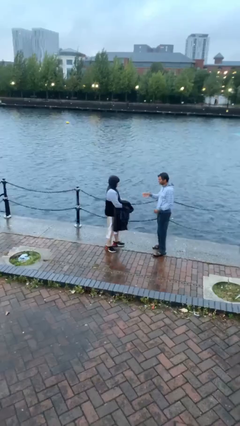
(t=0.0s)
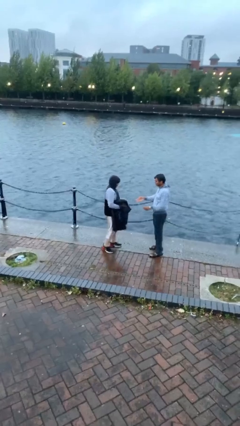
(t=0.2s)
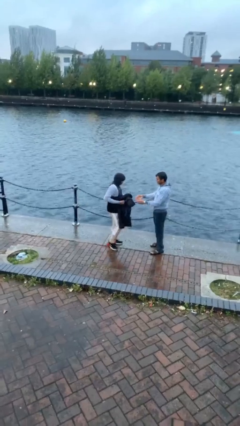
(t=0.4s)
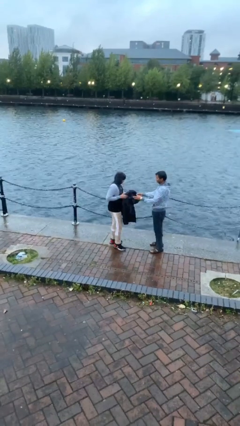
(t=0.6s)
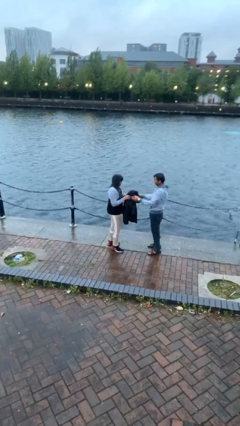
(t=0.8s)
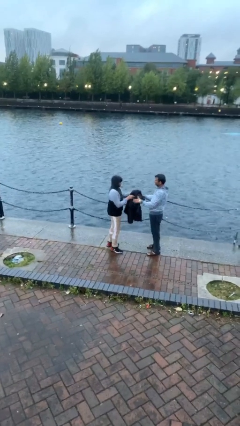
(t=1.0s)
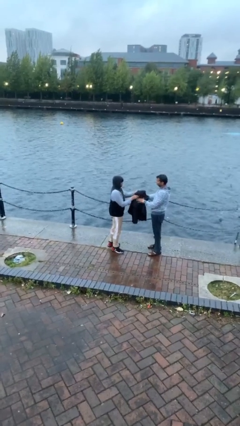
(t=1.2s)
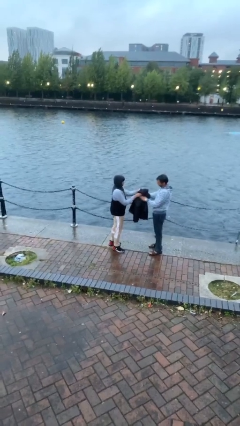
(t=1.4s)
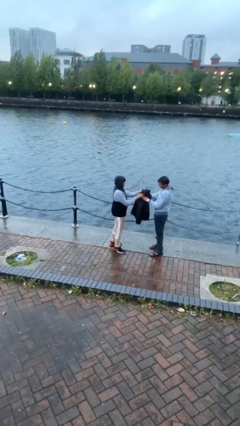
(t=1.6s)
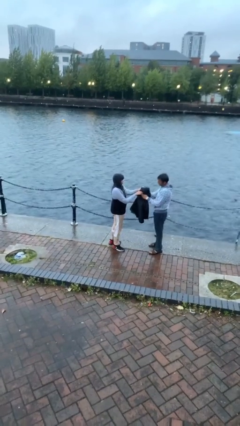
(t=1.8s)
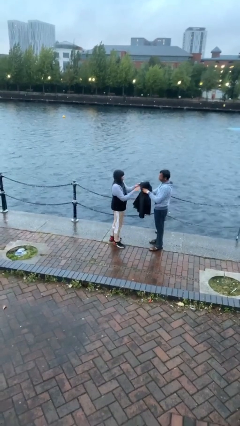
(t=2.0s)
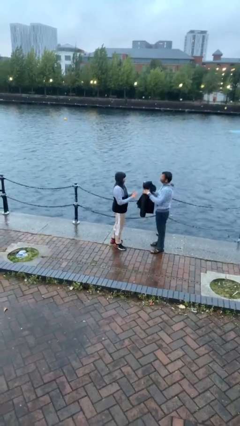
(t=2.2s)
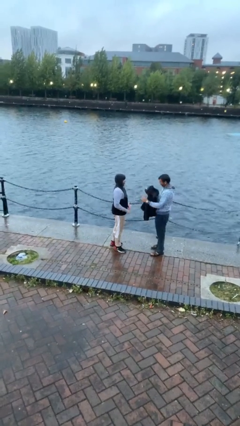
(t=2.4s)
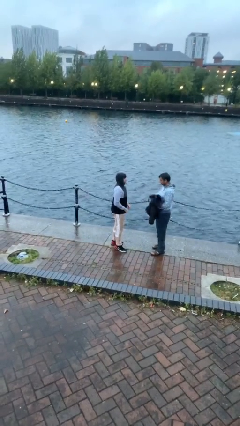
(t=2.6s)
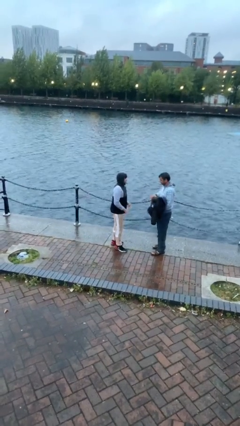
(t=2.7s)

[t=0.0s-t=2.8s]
person transfers object to person

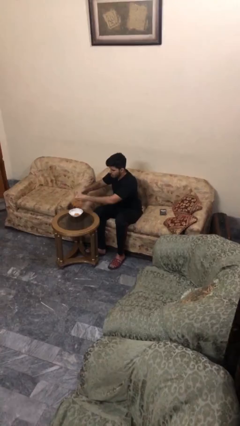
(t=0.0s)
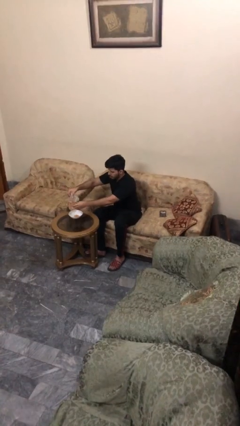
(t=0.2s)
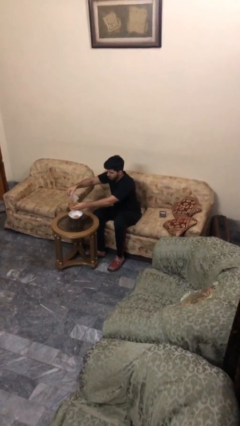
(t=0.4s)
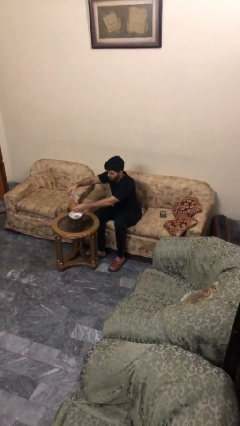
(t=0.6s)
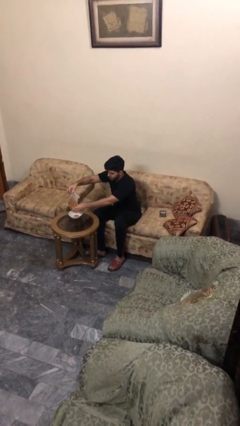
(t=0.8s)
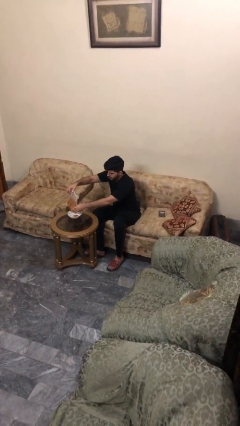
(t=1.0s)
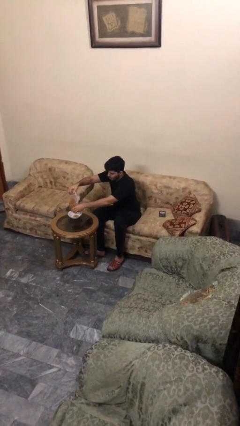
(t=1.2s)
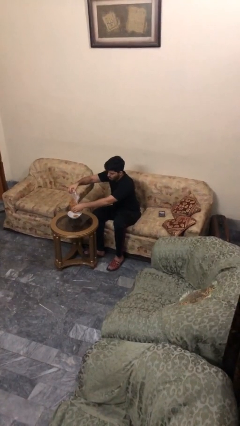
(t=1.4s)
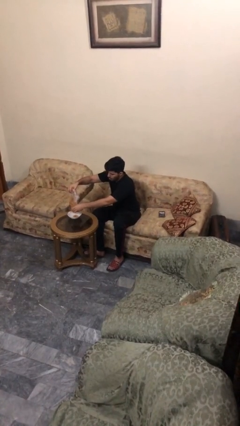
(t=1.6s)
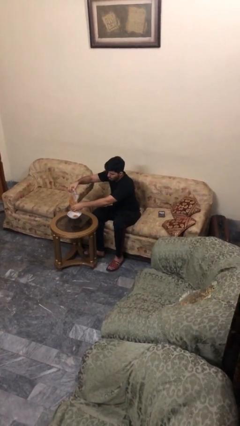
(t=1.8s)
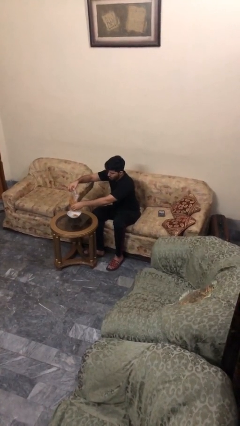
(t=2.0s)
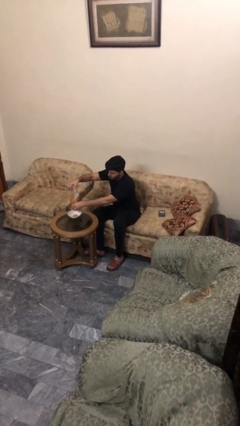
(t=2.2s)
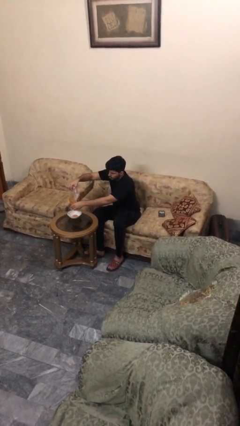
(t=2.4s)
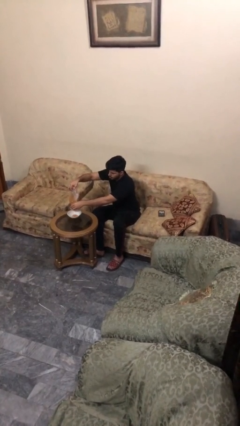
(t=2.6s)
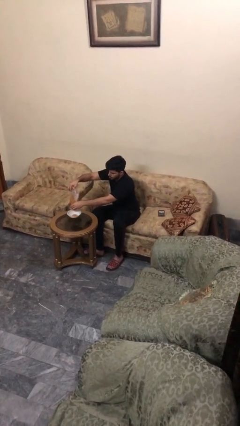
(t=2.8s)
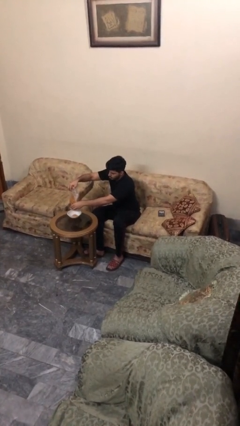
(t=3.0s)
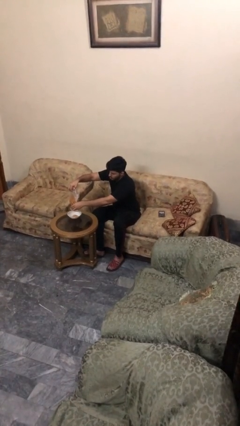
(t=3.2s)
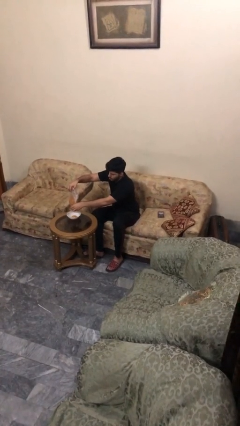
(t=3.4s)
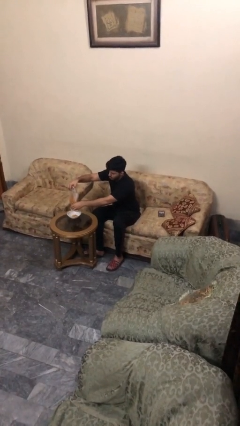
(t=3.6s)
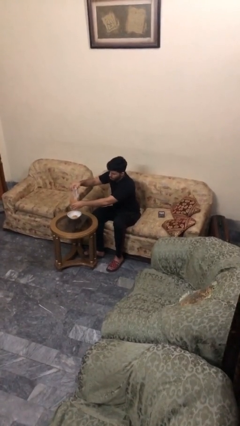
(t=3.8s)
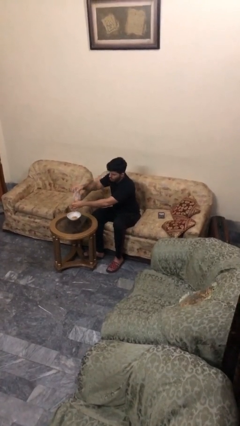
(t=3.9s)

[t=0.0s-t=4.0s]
person pours into bowl

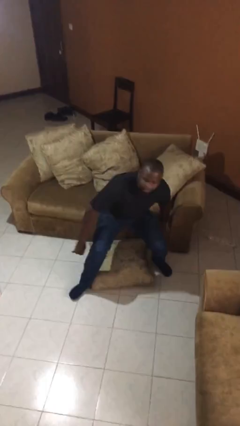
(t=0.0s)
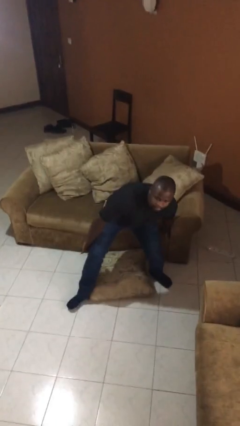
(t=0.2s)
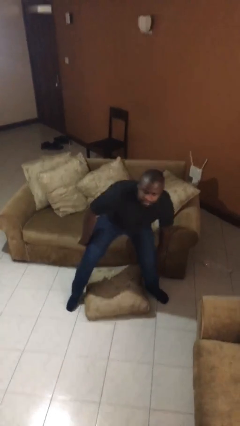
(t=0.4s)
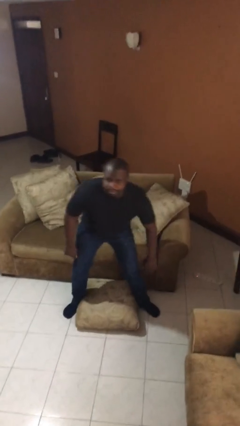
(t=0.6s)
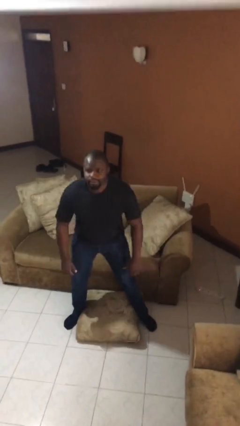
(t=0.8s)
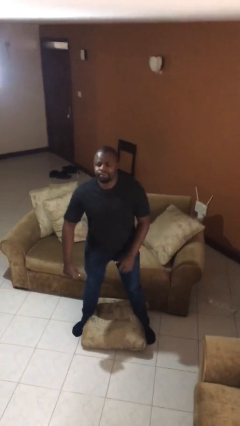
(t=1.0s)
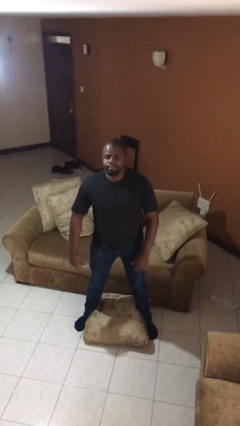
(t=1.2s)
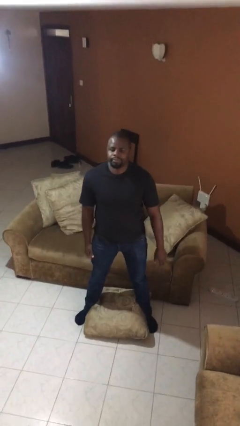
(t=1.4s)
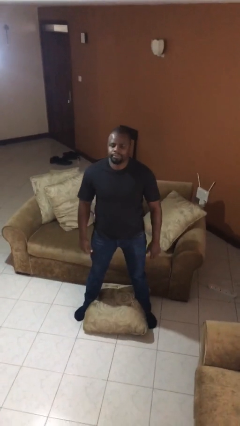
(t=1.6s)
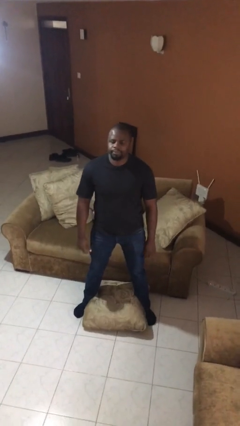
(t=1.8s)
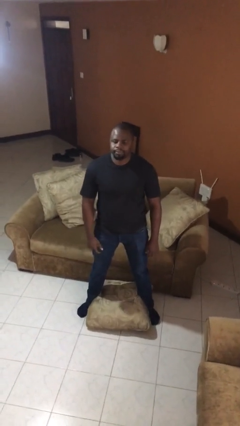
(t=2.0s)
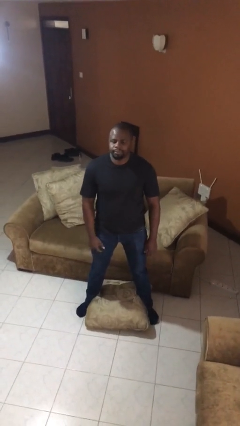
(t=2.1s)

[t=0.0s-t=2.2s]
person stands up from floor

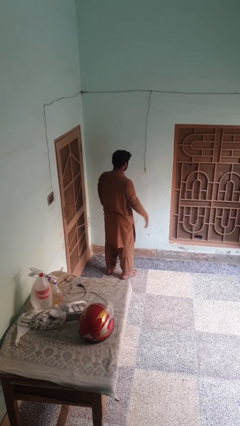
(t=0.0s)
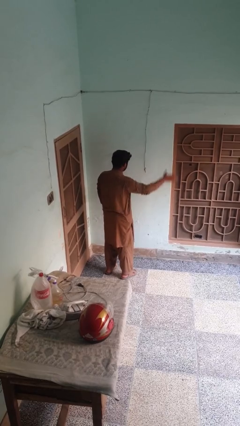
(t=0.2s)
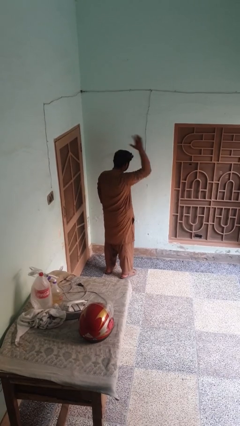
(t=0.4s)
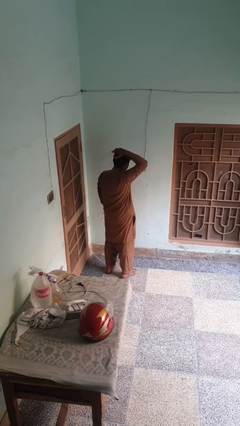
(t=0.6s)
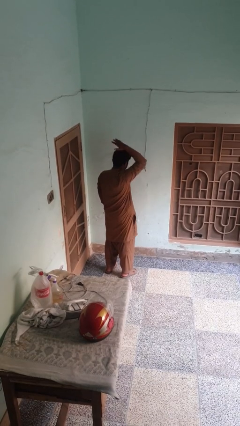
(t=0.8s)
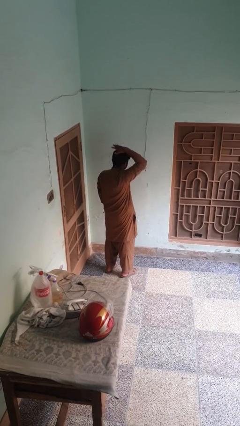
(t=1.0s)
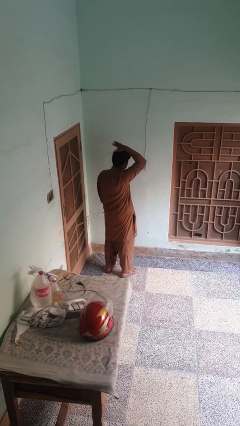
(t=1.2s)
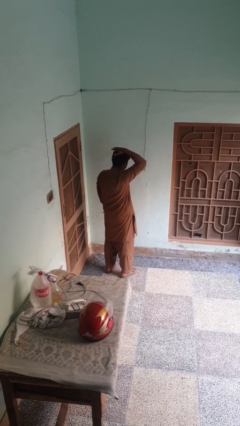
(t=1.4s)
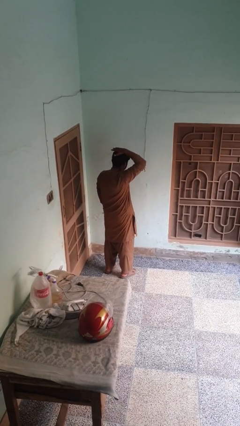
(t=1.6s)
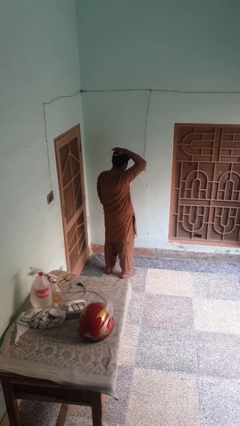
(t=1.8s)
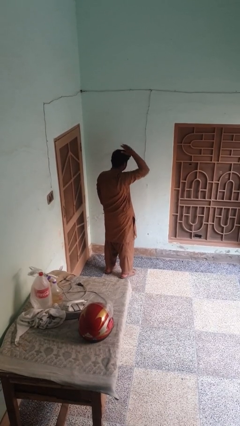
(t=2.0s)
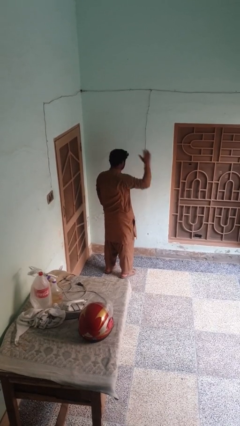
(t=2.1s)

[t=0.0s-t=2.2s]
person pats head

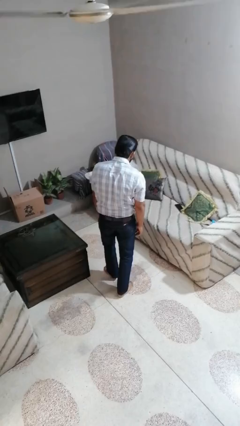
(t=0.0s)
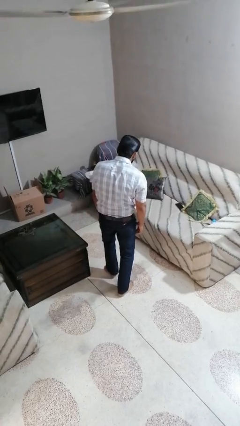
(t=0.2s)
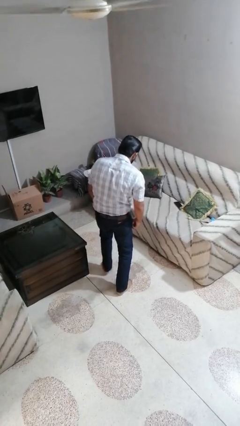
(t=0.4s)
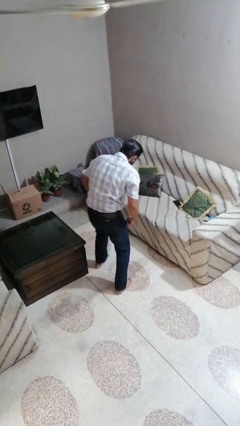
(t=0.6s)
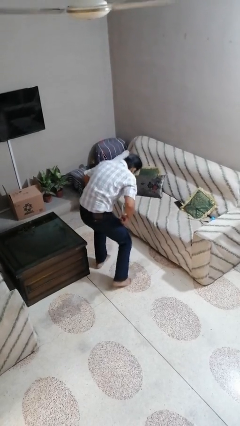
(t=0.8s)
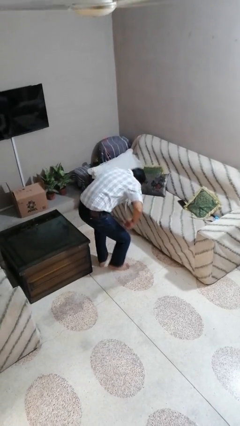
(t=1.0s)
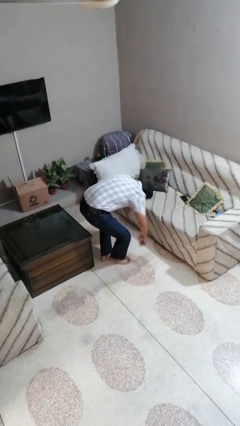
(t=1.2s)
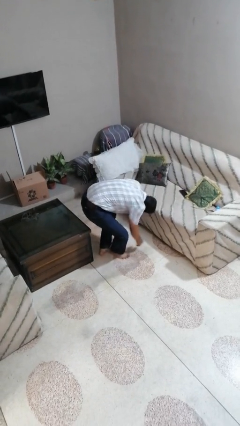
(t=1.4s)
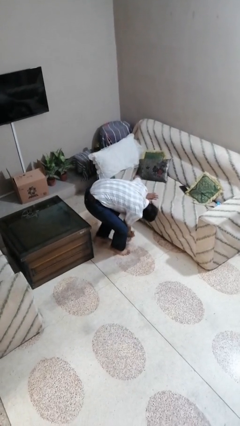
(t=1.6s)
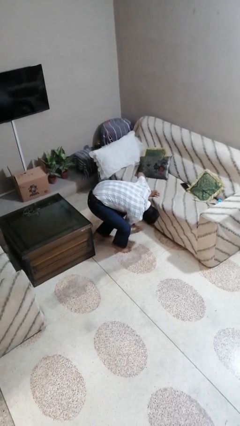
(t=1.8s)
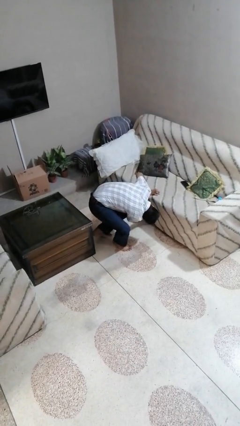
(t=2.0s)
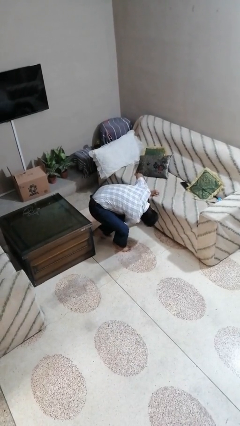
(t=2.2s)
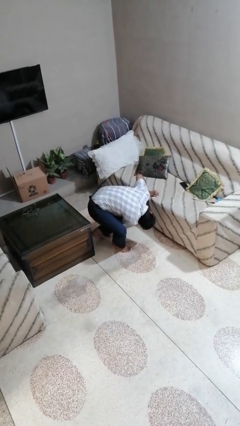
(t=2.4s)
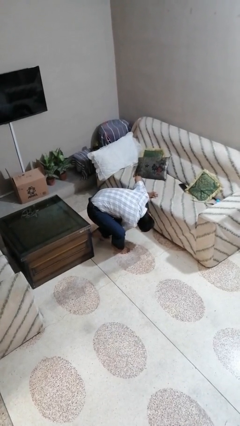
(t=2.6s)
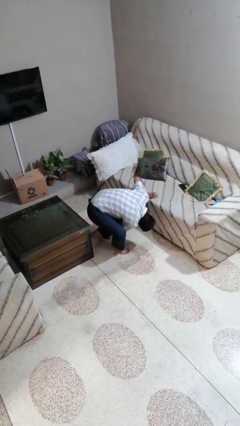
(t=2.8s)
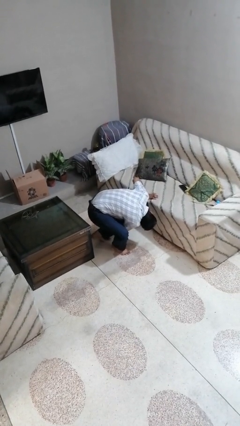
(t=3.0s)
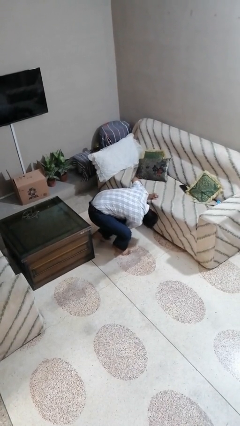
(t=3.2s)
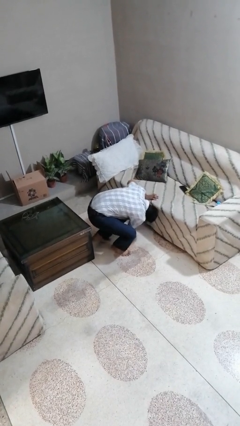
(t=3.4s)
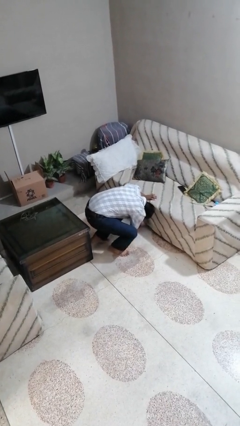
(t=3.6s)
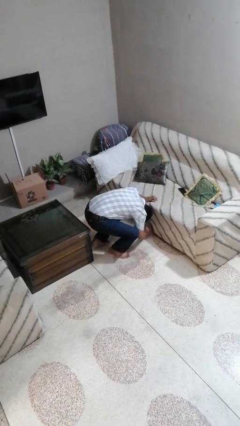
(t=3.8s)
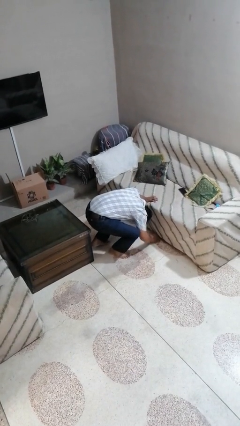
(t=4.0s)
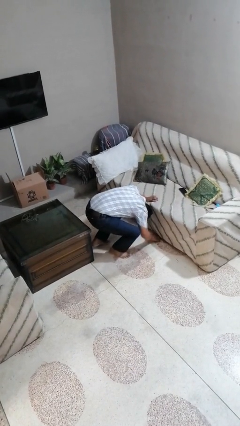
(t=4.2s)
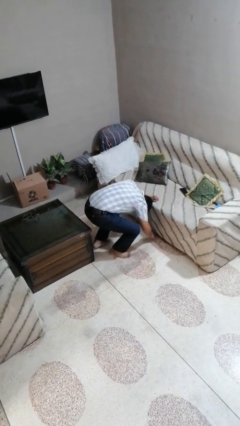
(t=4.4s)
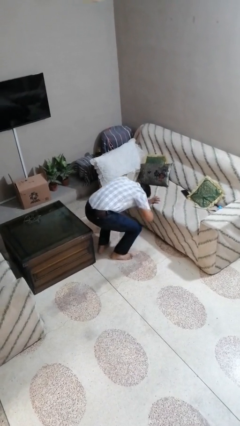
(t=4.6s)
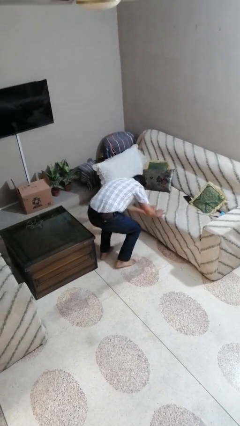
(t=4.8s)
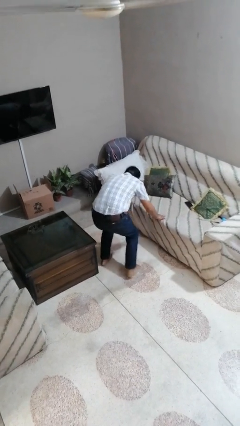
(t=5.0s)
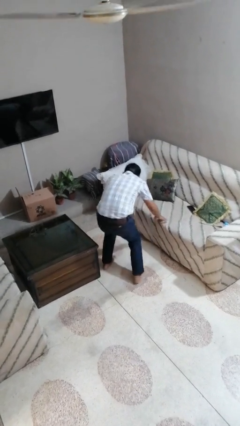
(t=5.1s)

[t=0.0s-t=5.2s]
person searches under couch

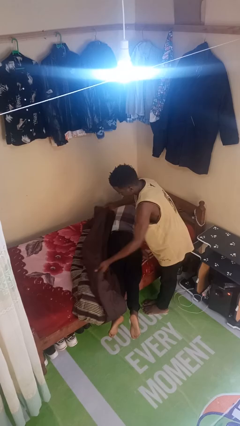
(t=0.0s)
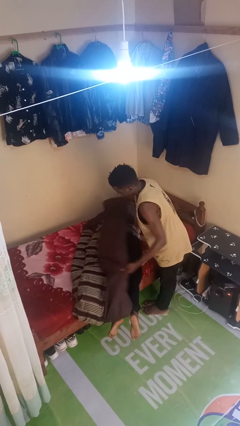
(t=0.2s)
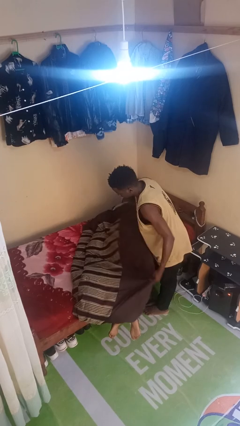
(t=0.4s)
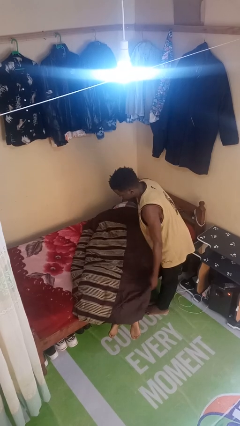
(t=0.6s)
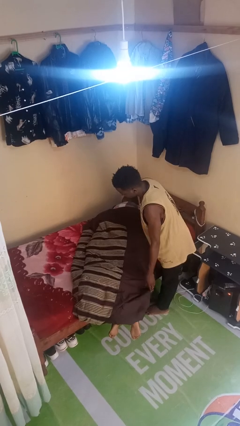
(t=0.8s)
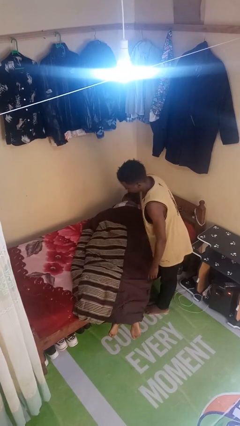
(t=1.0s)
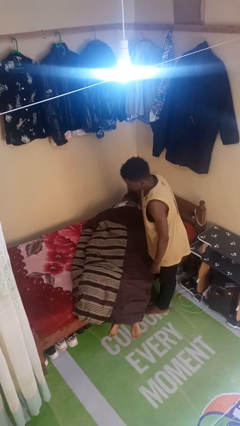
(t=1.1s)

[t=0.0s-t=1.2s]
person covers friend with blanket
